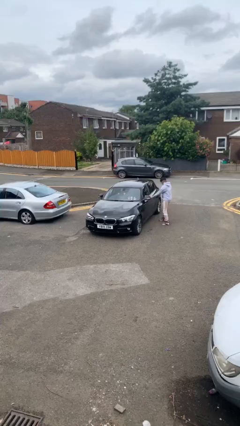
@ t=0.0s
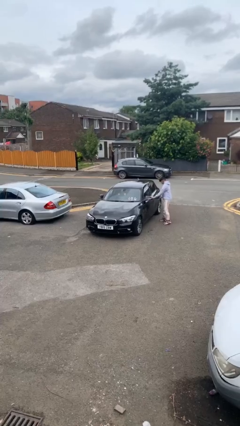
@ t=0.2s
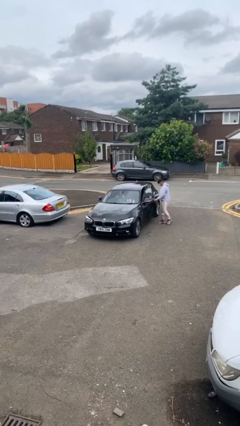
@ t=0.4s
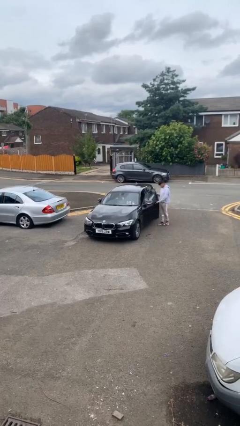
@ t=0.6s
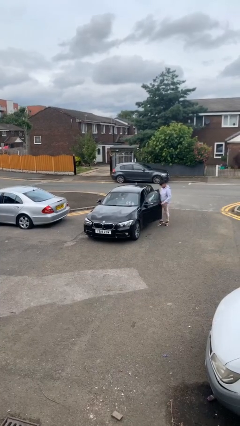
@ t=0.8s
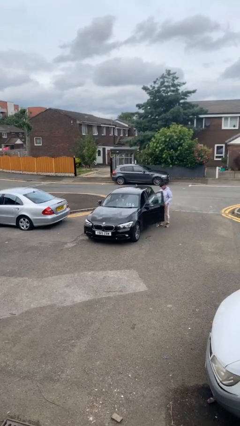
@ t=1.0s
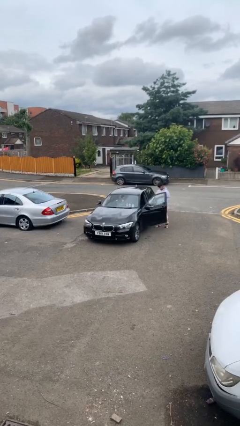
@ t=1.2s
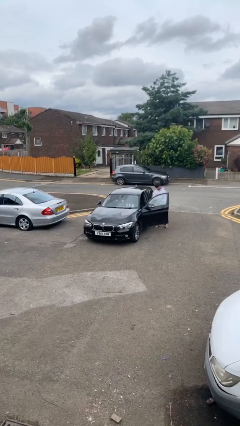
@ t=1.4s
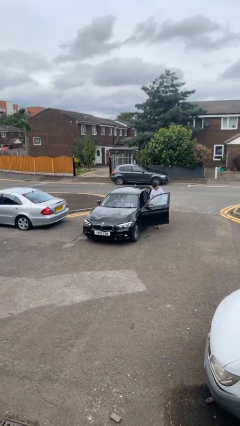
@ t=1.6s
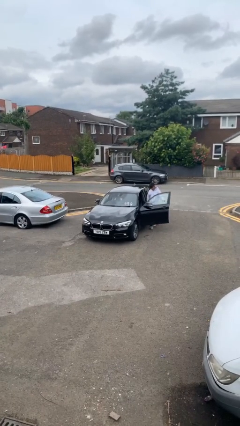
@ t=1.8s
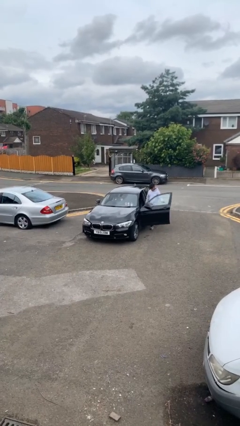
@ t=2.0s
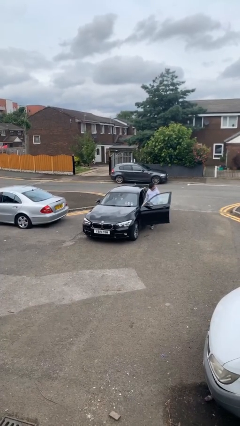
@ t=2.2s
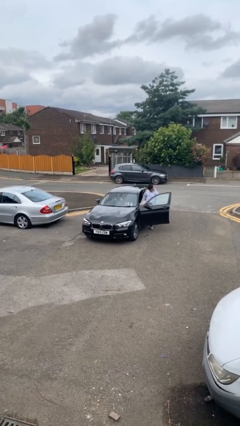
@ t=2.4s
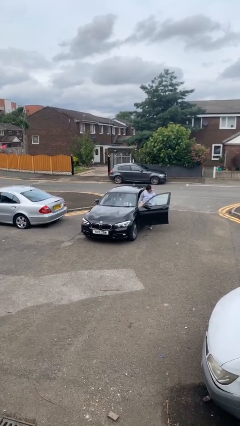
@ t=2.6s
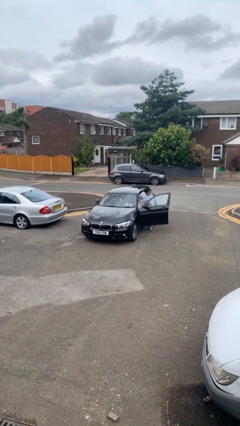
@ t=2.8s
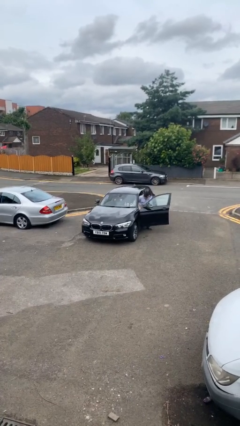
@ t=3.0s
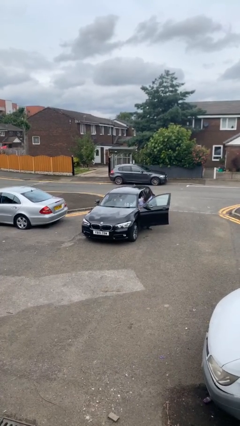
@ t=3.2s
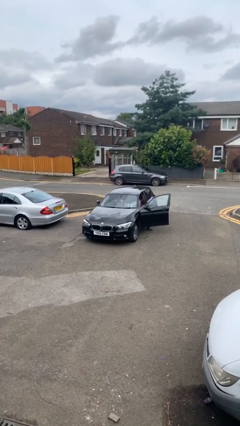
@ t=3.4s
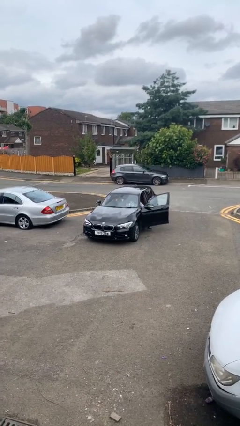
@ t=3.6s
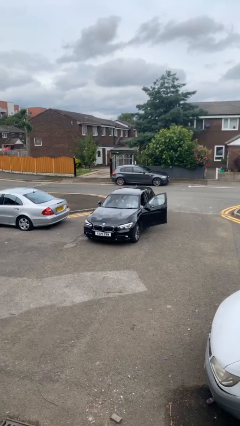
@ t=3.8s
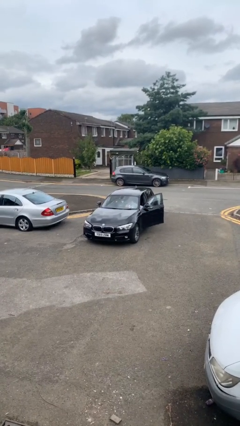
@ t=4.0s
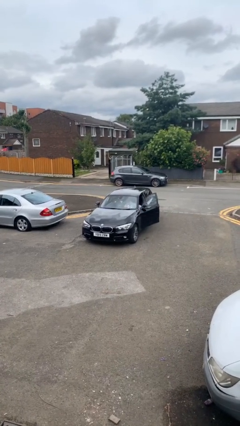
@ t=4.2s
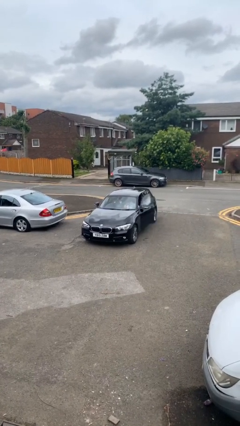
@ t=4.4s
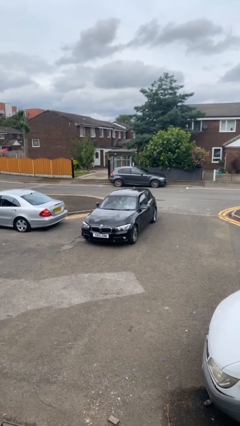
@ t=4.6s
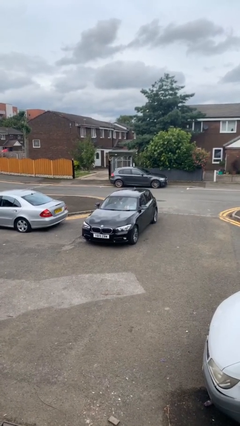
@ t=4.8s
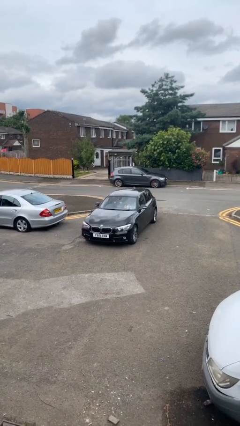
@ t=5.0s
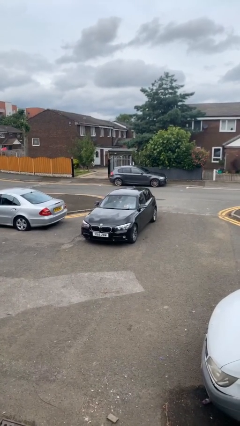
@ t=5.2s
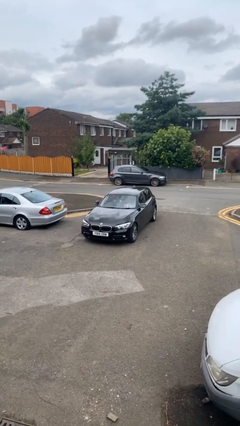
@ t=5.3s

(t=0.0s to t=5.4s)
car picks up person

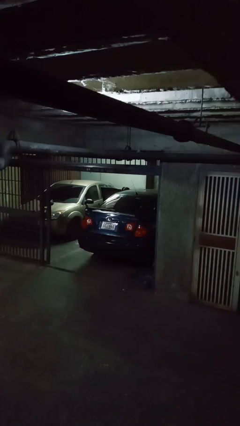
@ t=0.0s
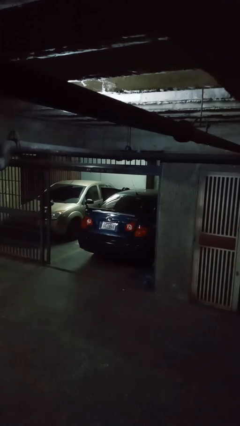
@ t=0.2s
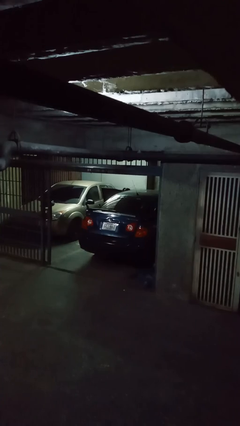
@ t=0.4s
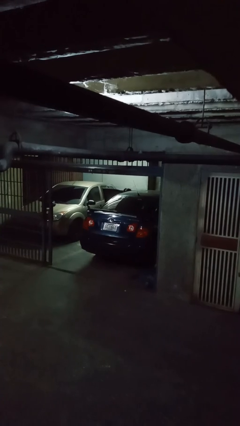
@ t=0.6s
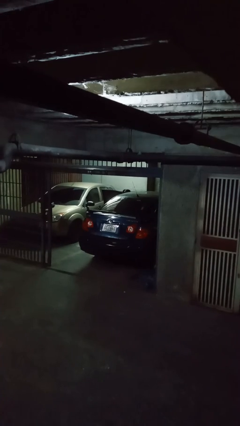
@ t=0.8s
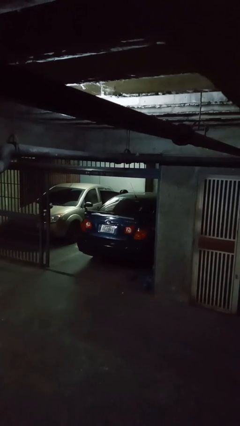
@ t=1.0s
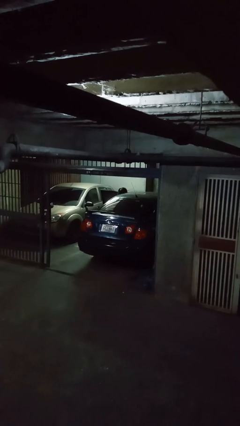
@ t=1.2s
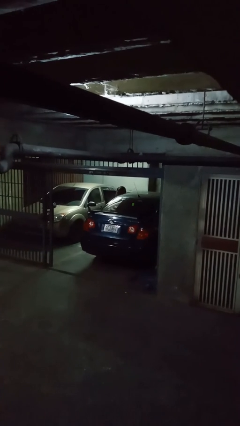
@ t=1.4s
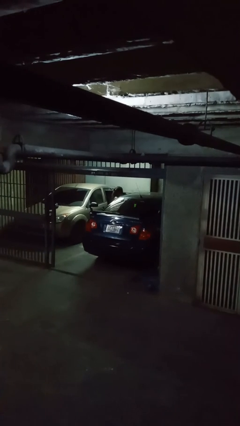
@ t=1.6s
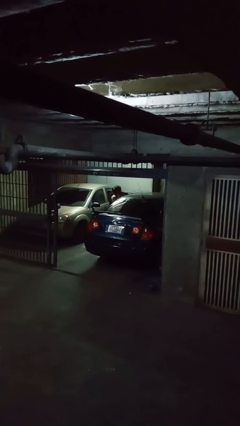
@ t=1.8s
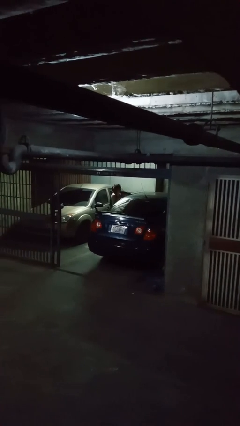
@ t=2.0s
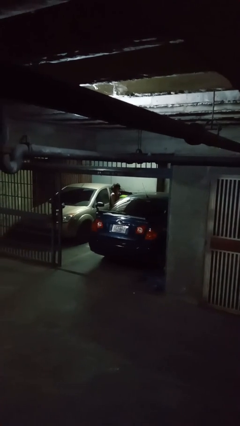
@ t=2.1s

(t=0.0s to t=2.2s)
person unloads car

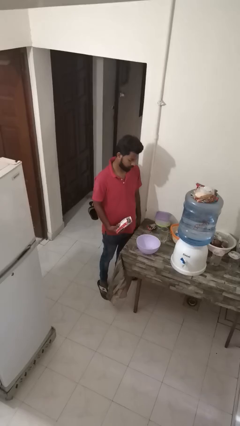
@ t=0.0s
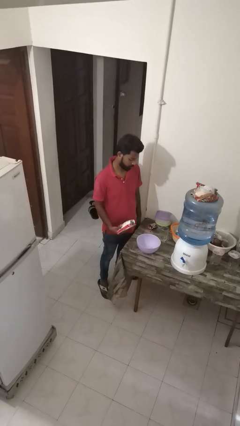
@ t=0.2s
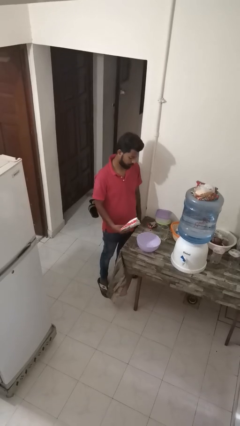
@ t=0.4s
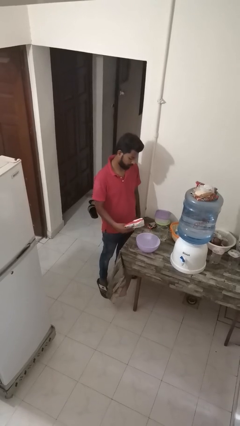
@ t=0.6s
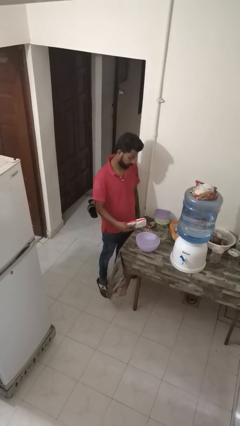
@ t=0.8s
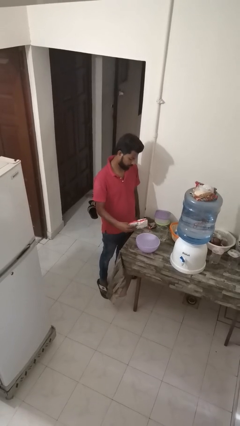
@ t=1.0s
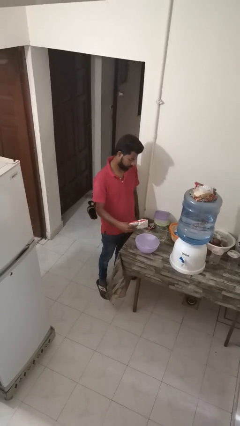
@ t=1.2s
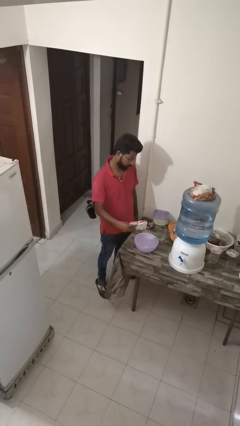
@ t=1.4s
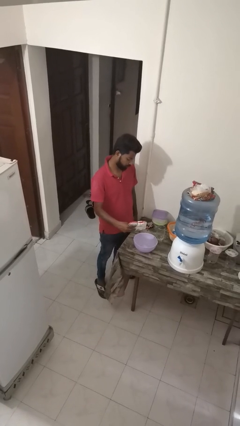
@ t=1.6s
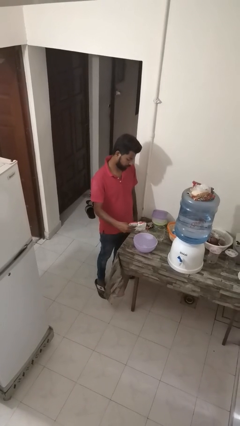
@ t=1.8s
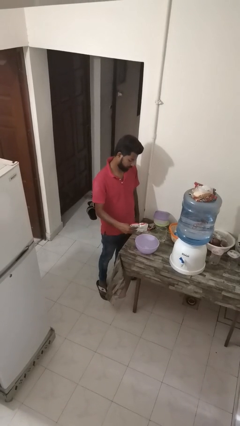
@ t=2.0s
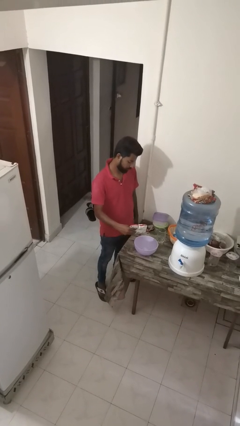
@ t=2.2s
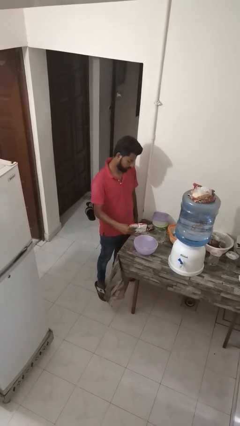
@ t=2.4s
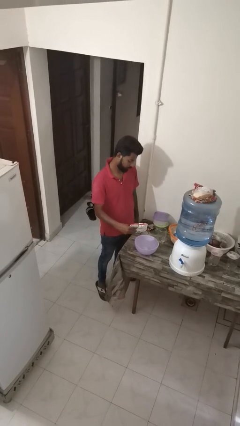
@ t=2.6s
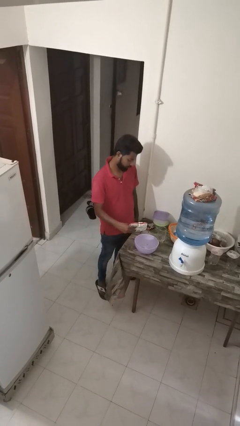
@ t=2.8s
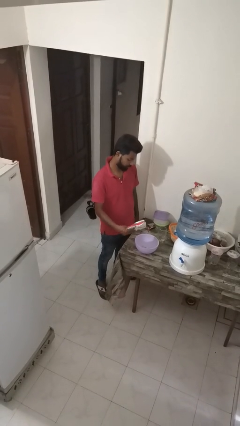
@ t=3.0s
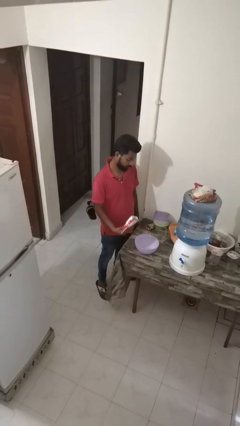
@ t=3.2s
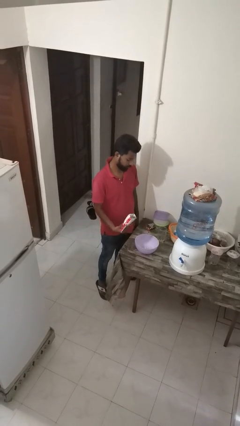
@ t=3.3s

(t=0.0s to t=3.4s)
person pours into bowl

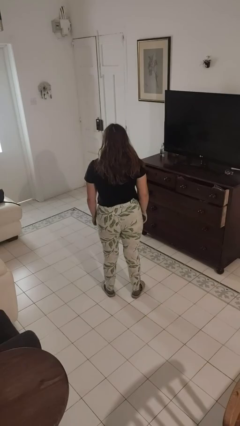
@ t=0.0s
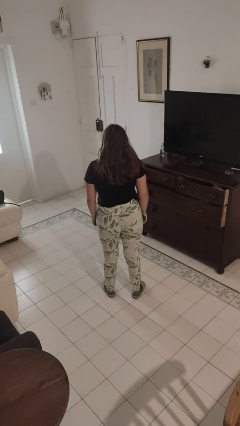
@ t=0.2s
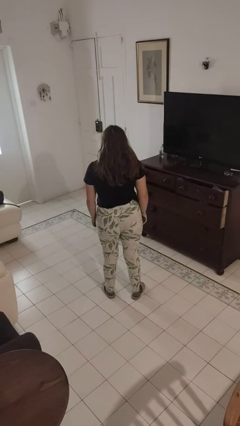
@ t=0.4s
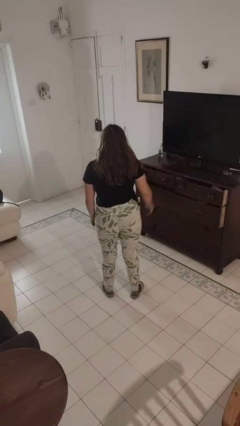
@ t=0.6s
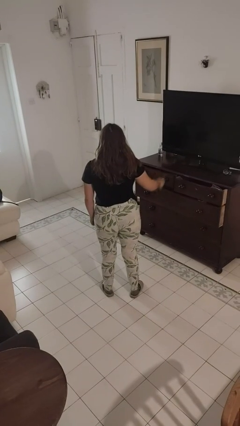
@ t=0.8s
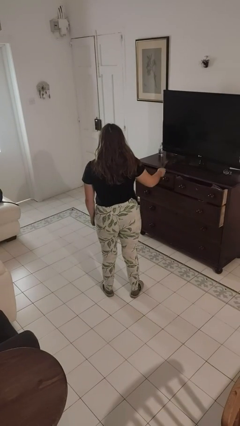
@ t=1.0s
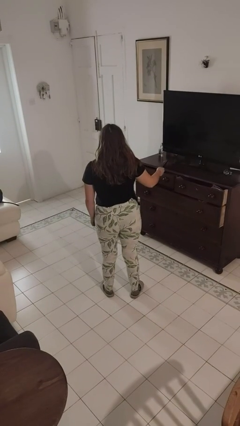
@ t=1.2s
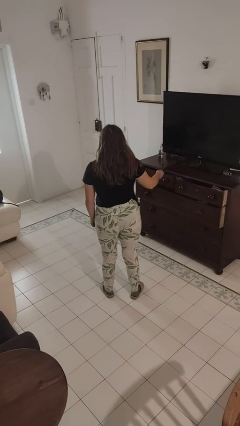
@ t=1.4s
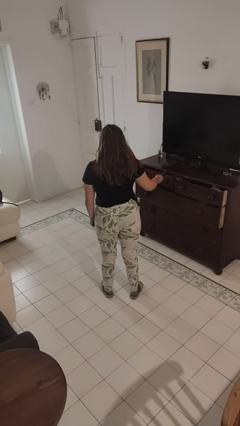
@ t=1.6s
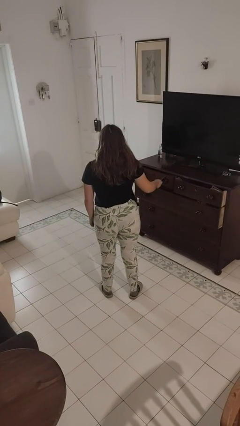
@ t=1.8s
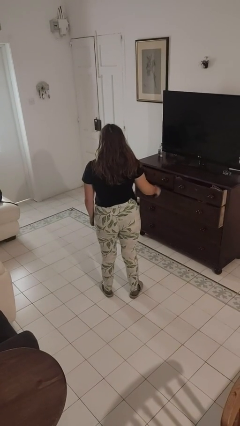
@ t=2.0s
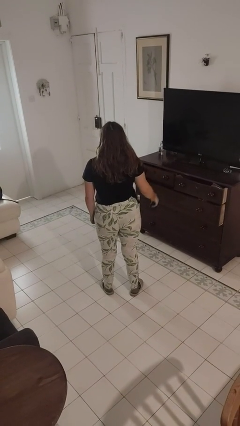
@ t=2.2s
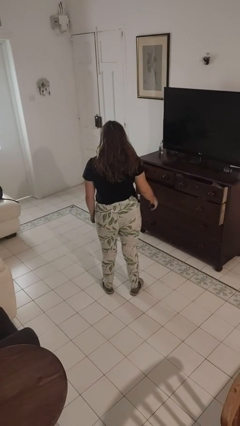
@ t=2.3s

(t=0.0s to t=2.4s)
person uses television remote

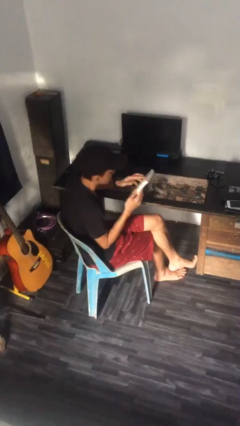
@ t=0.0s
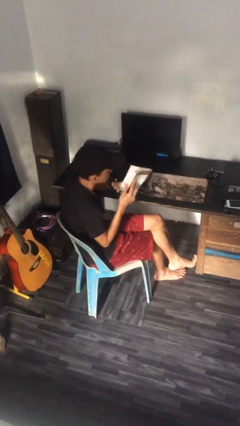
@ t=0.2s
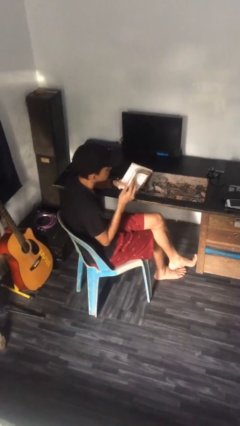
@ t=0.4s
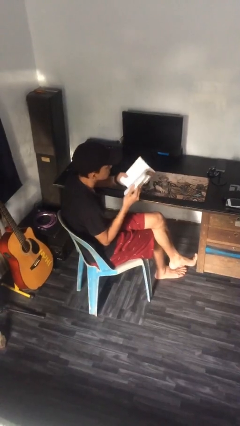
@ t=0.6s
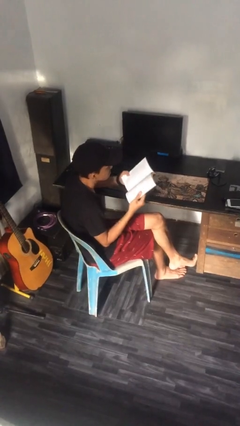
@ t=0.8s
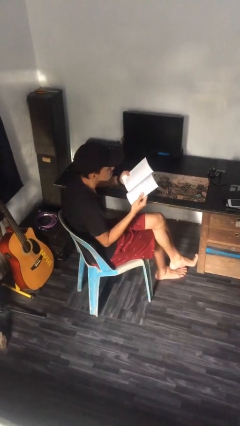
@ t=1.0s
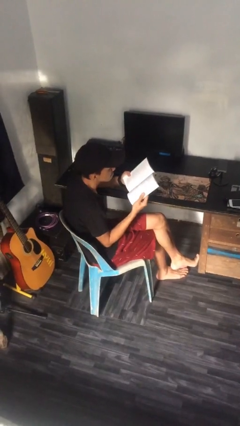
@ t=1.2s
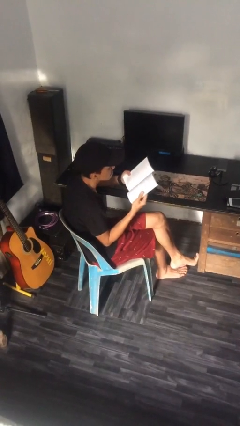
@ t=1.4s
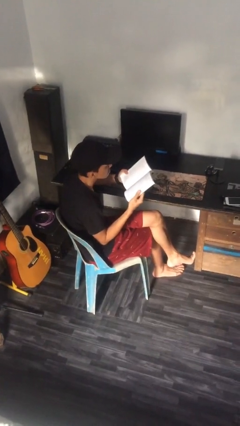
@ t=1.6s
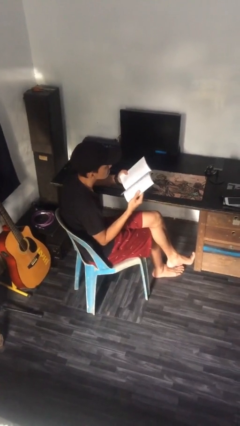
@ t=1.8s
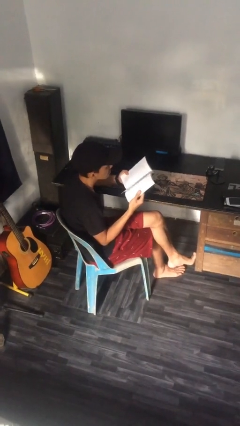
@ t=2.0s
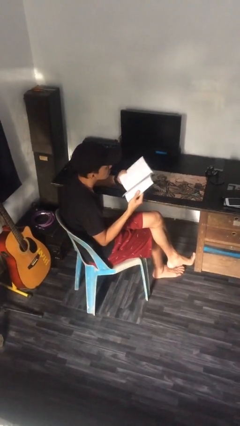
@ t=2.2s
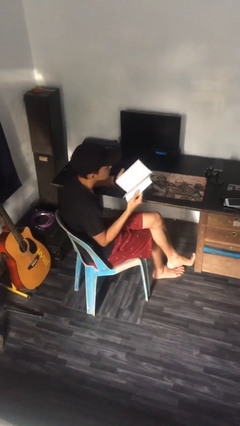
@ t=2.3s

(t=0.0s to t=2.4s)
person reads document

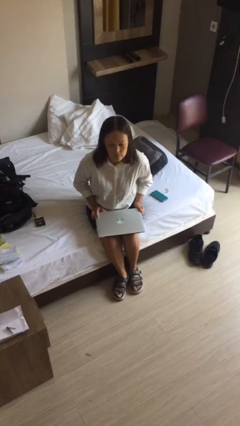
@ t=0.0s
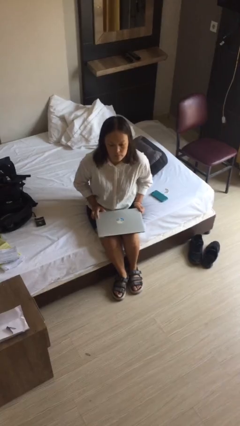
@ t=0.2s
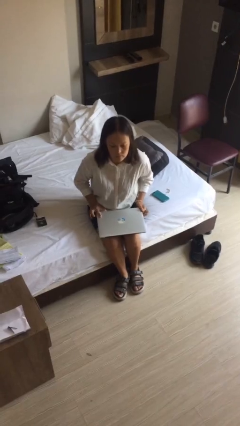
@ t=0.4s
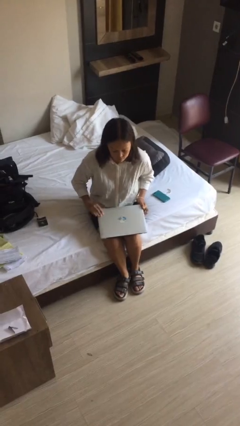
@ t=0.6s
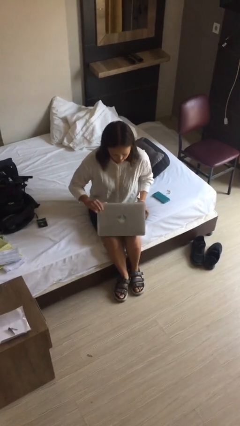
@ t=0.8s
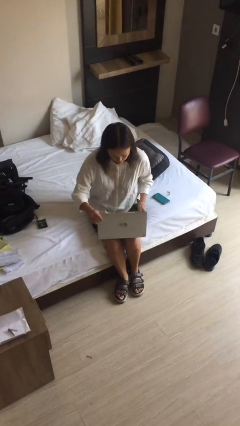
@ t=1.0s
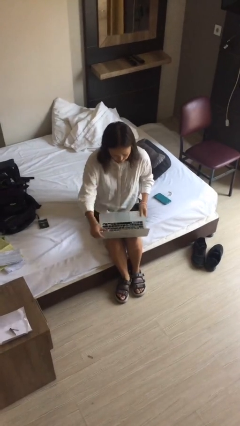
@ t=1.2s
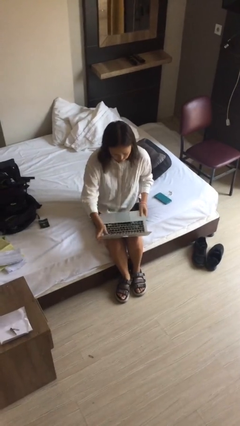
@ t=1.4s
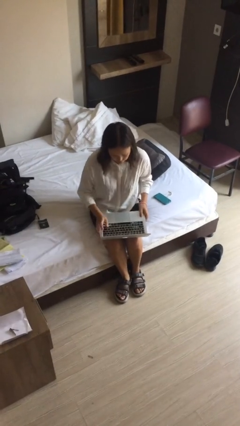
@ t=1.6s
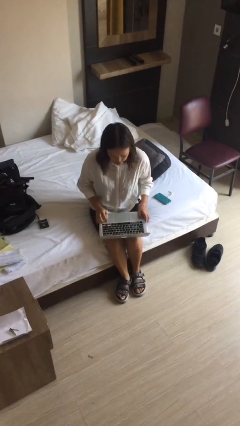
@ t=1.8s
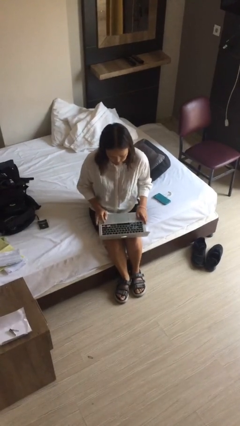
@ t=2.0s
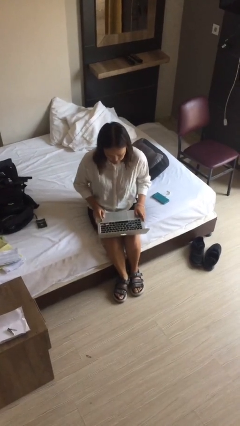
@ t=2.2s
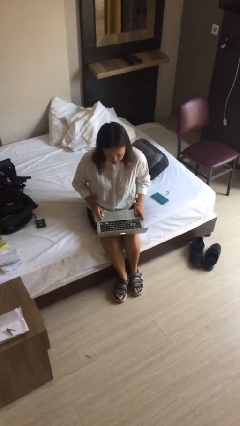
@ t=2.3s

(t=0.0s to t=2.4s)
person opens laptop
